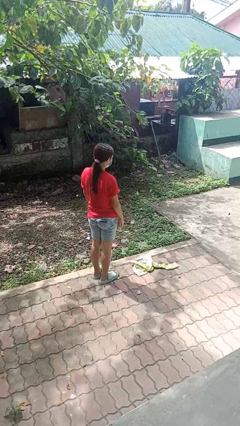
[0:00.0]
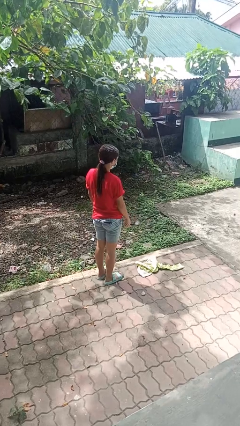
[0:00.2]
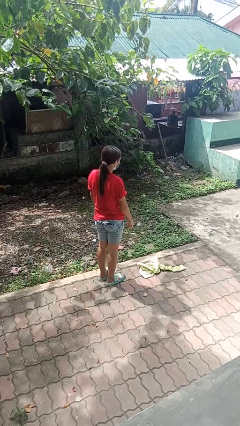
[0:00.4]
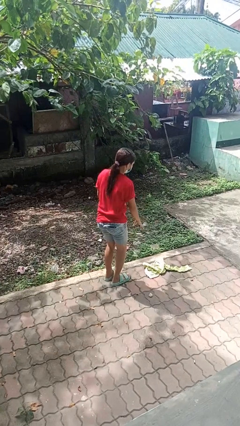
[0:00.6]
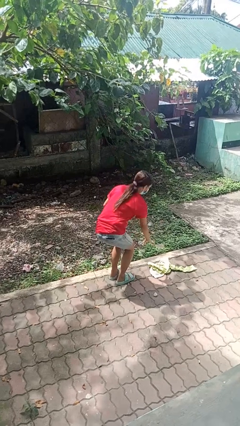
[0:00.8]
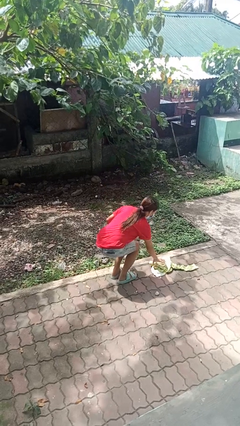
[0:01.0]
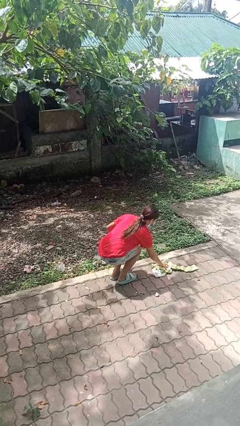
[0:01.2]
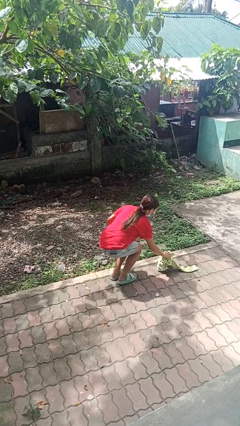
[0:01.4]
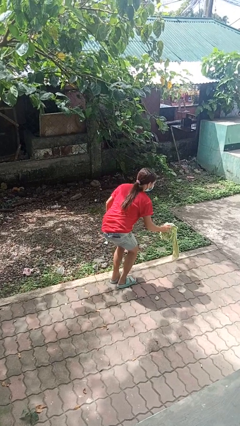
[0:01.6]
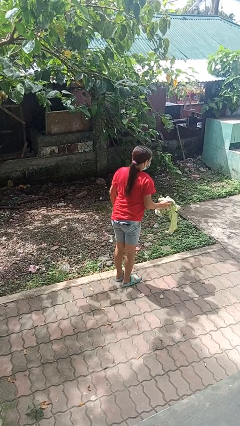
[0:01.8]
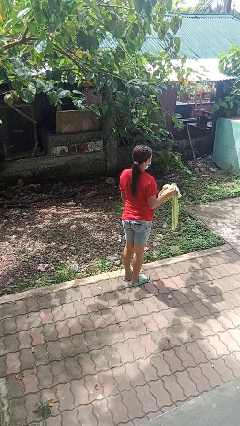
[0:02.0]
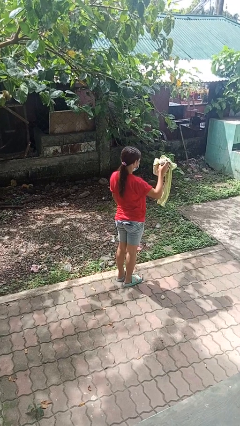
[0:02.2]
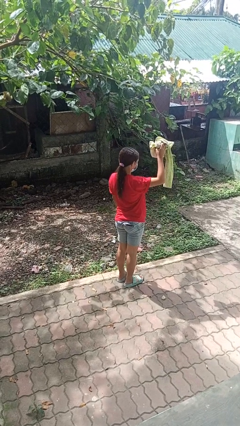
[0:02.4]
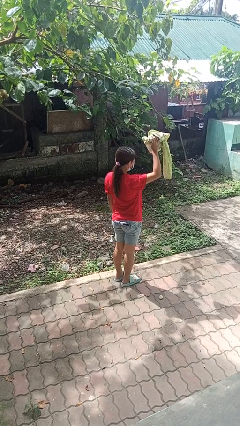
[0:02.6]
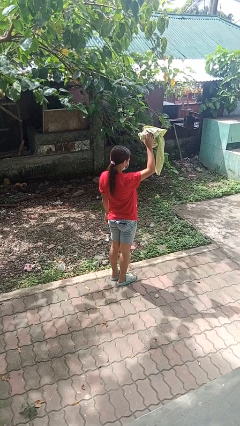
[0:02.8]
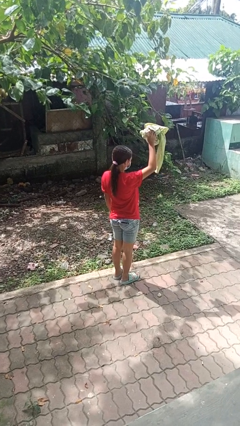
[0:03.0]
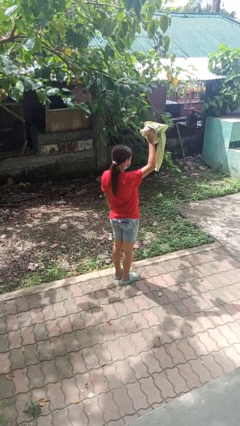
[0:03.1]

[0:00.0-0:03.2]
person picks up object from floor

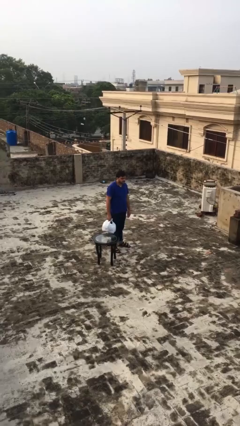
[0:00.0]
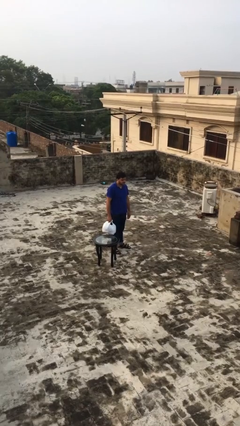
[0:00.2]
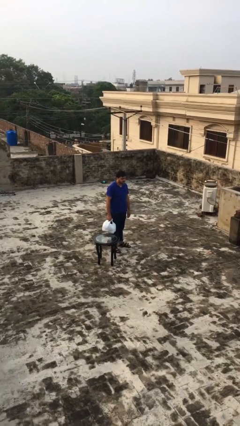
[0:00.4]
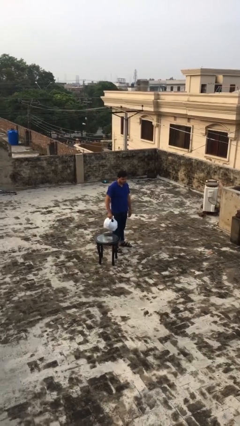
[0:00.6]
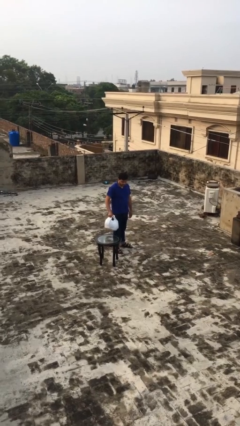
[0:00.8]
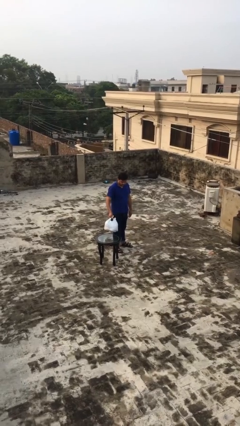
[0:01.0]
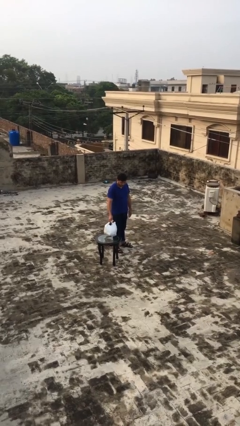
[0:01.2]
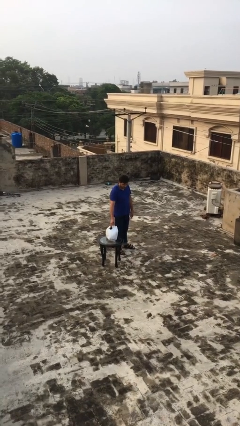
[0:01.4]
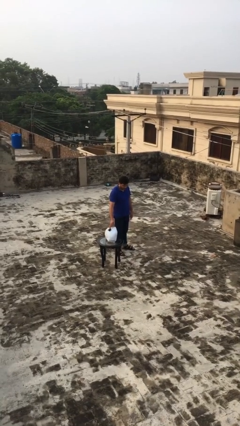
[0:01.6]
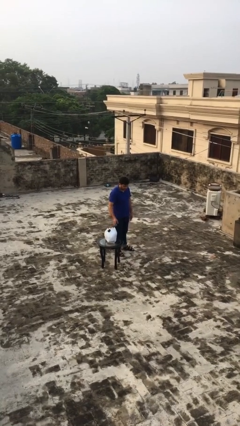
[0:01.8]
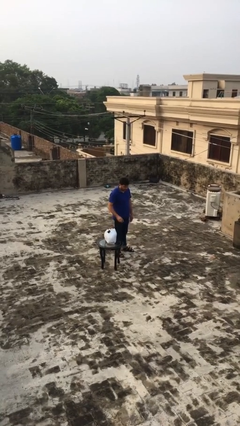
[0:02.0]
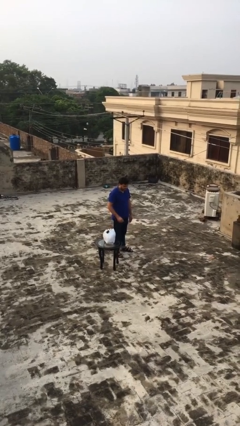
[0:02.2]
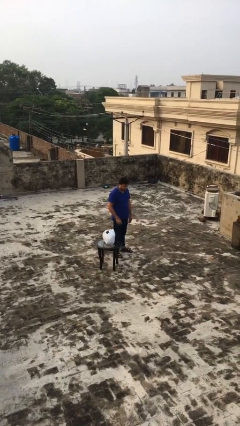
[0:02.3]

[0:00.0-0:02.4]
person puts down object on table

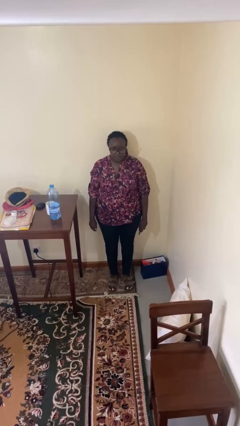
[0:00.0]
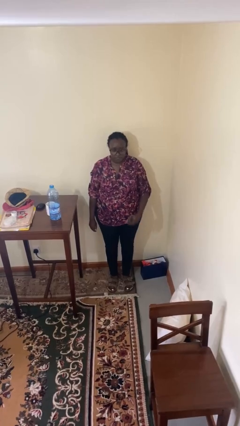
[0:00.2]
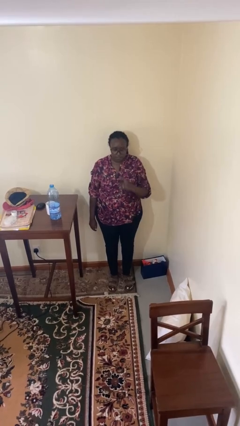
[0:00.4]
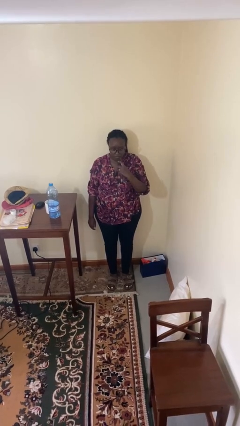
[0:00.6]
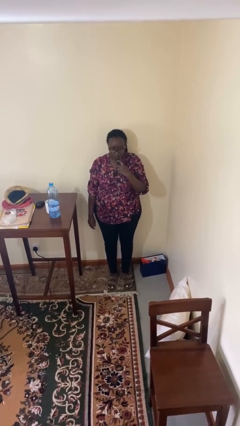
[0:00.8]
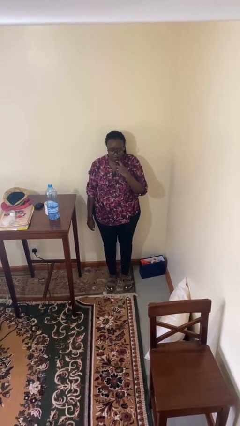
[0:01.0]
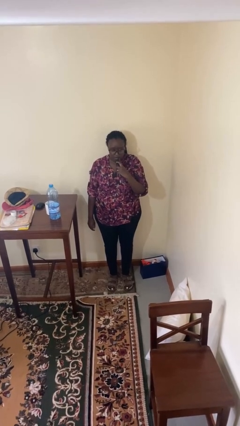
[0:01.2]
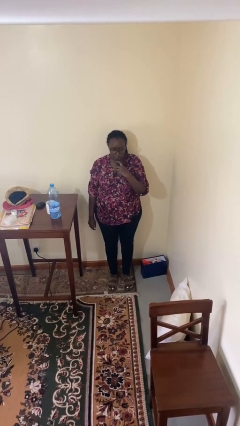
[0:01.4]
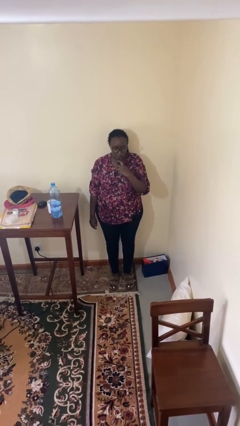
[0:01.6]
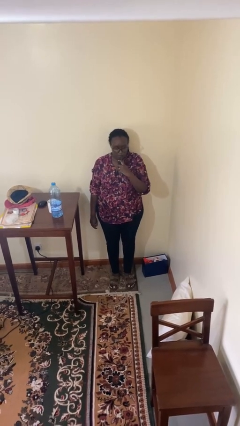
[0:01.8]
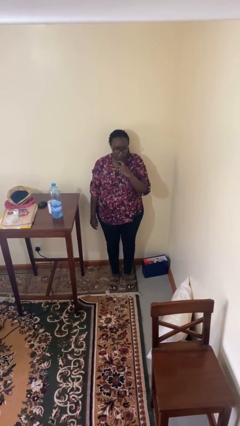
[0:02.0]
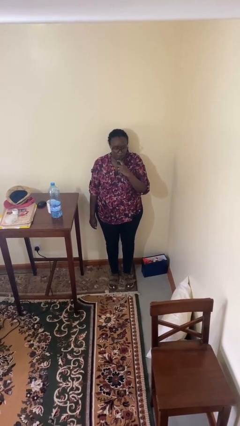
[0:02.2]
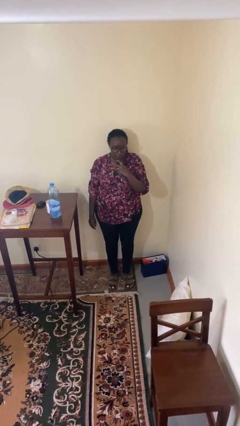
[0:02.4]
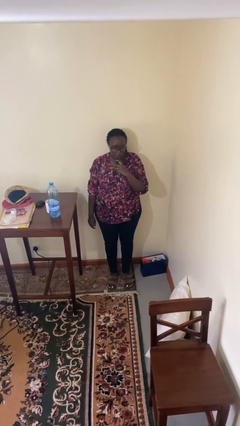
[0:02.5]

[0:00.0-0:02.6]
person vapes

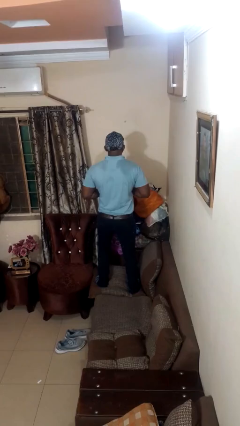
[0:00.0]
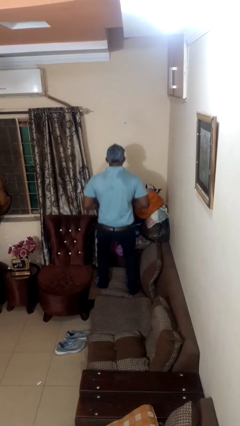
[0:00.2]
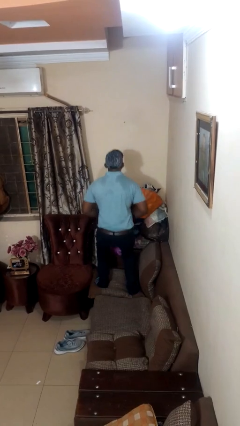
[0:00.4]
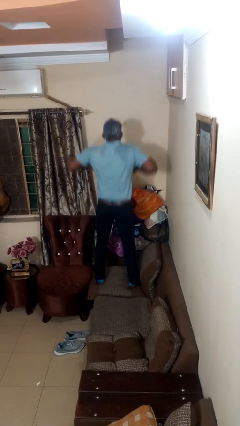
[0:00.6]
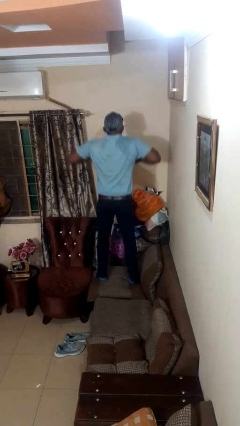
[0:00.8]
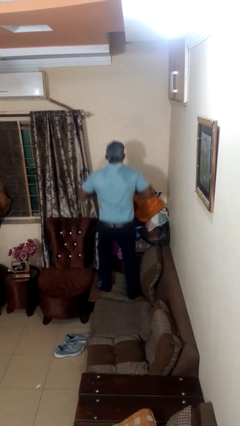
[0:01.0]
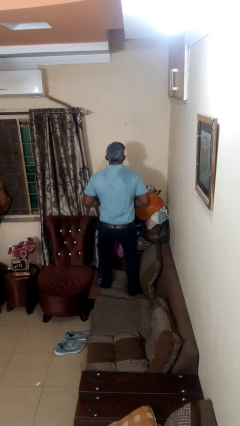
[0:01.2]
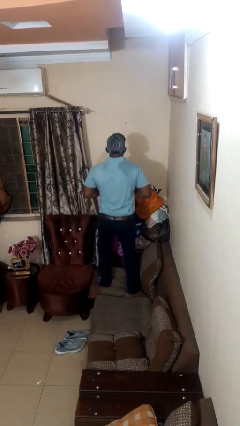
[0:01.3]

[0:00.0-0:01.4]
person jumps on couch

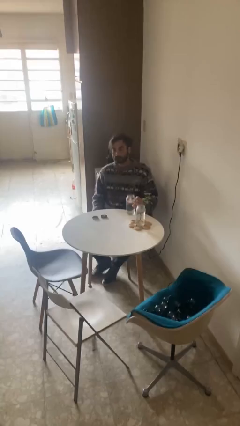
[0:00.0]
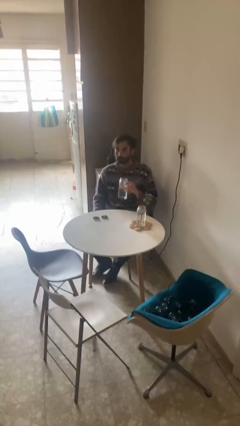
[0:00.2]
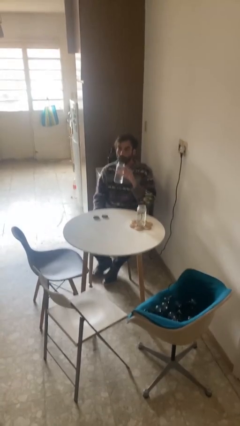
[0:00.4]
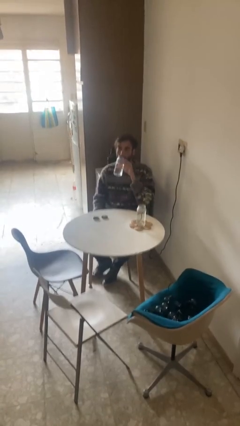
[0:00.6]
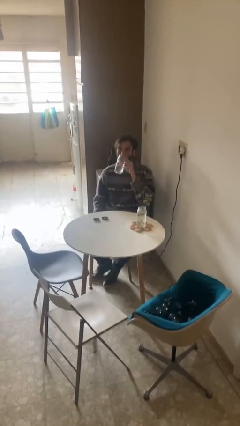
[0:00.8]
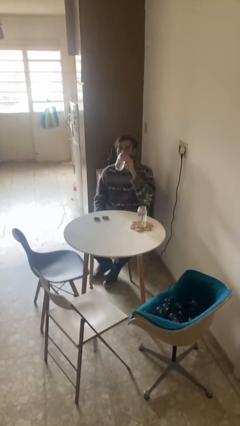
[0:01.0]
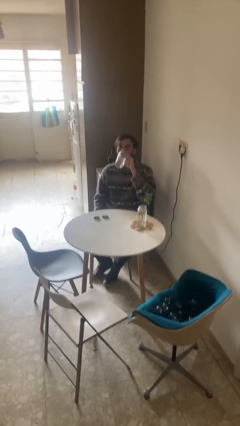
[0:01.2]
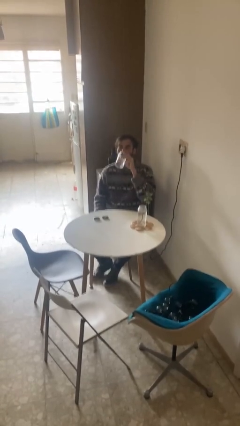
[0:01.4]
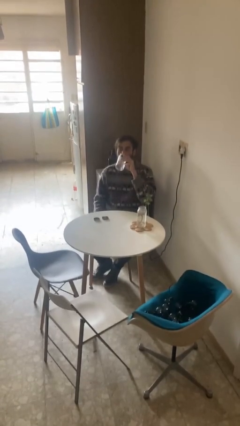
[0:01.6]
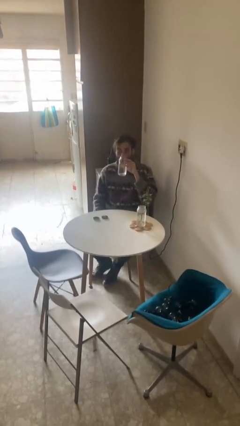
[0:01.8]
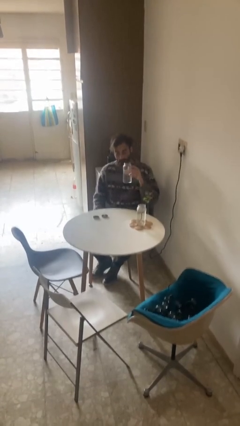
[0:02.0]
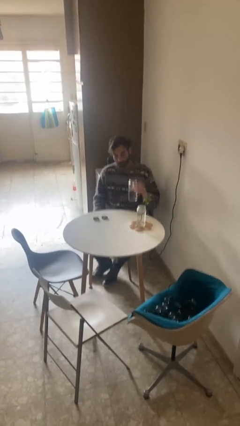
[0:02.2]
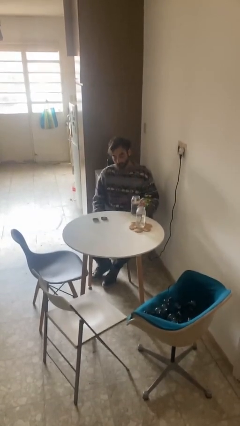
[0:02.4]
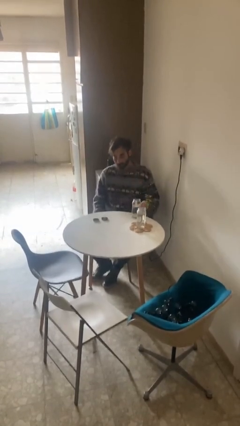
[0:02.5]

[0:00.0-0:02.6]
person drinks from cup

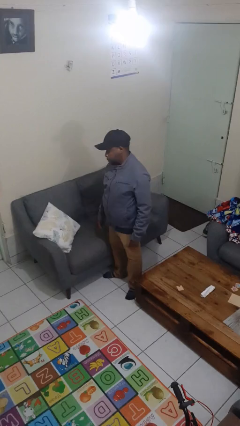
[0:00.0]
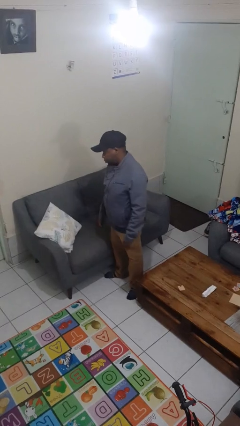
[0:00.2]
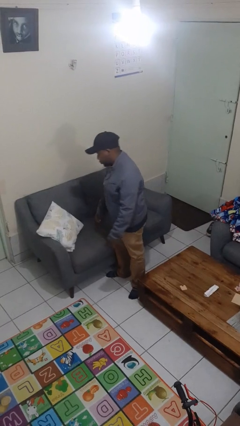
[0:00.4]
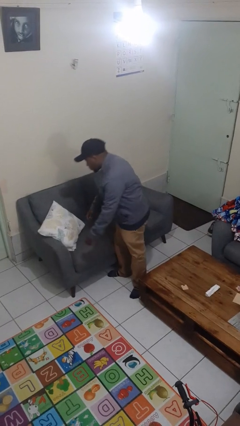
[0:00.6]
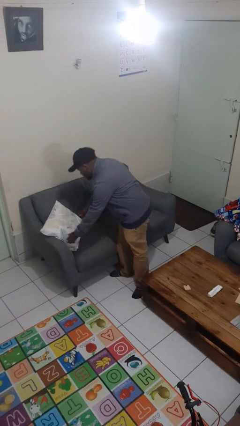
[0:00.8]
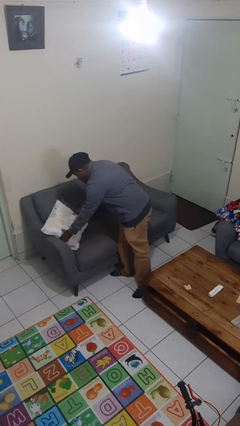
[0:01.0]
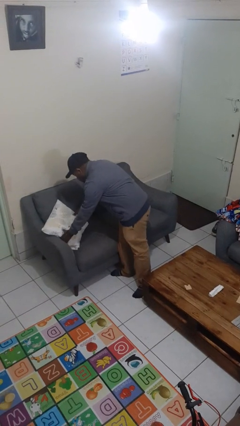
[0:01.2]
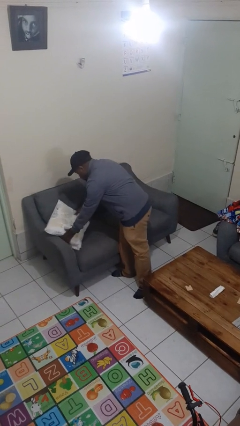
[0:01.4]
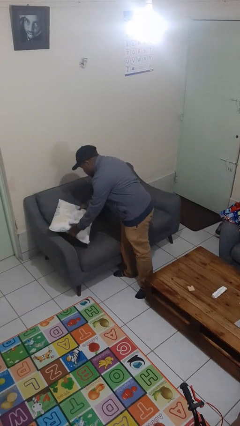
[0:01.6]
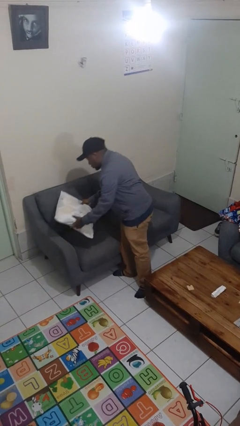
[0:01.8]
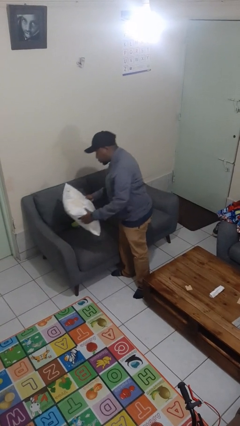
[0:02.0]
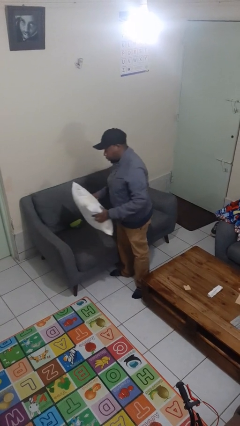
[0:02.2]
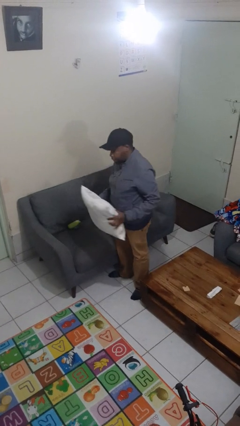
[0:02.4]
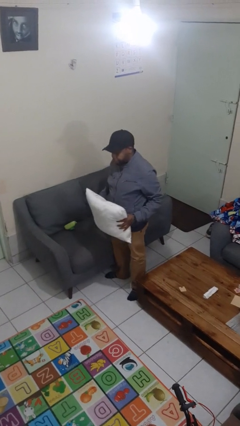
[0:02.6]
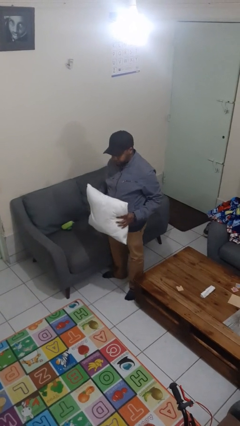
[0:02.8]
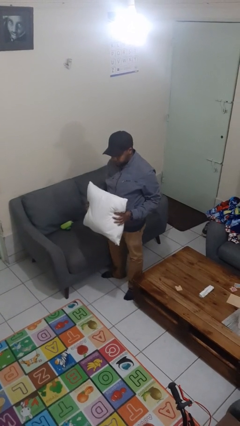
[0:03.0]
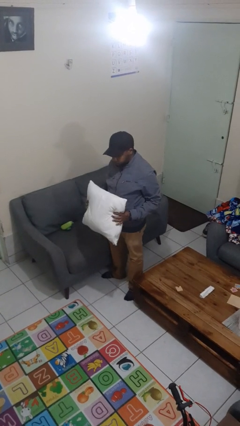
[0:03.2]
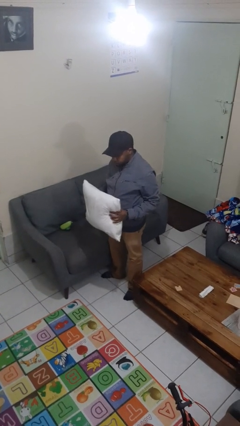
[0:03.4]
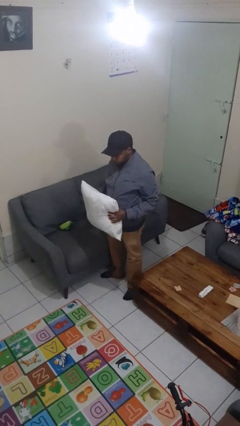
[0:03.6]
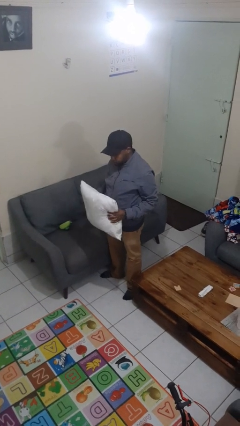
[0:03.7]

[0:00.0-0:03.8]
person picks up object from couch

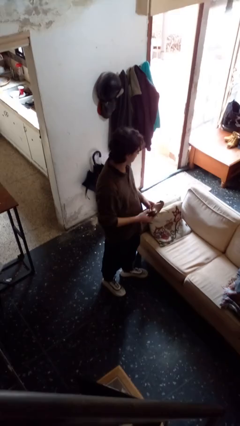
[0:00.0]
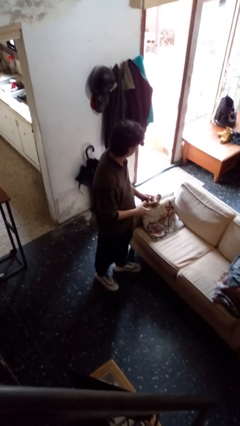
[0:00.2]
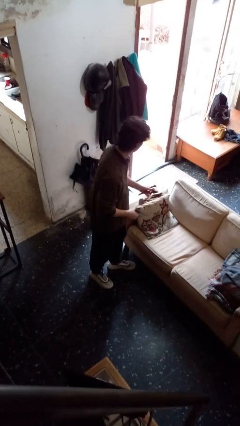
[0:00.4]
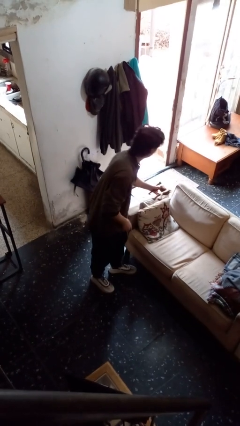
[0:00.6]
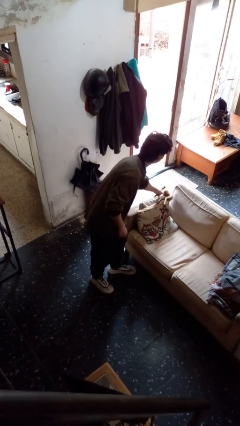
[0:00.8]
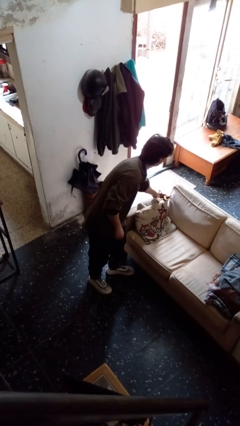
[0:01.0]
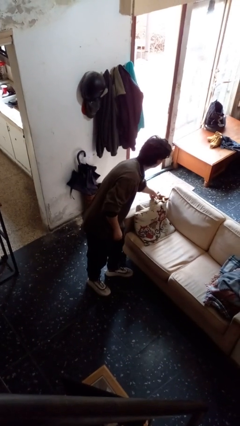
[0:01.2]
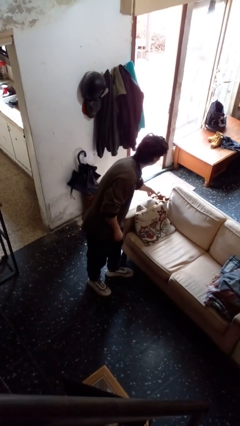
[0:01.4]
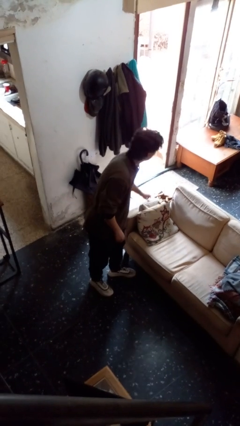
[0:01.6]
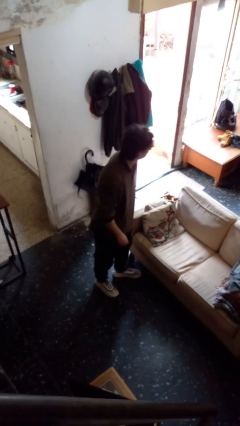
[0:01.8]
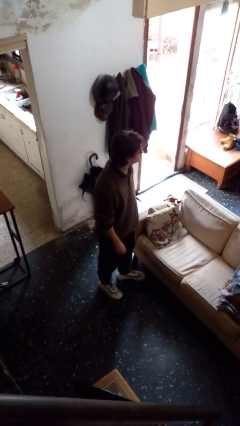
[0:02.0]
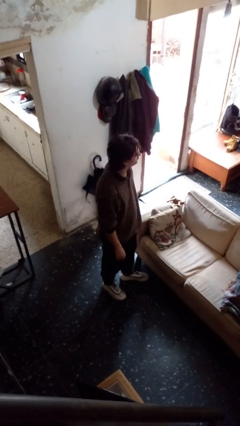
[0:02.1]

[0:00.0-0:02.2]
person puts down object on couch
